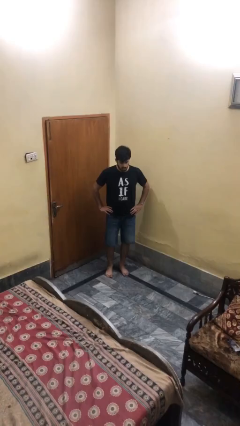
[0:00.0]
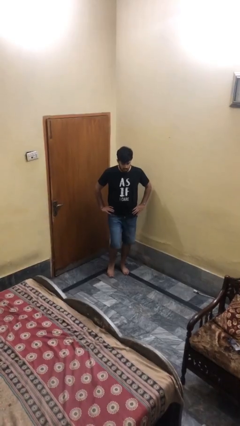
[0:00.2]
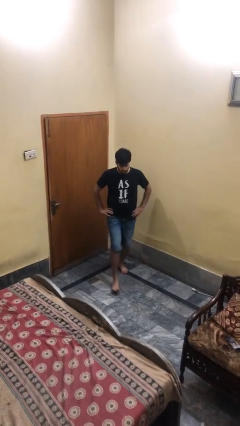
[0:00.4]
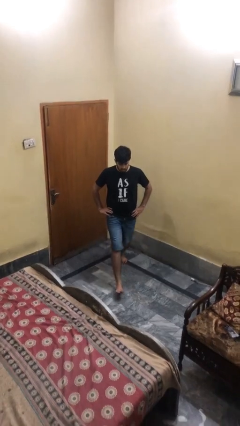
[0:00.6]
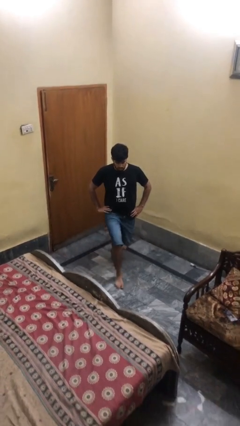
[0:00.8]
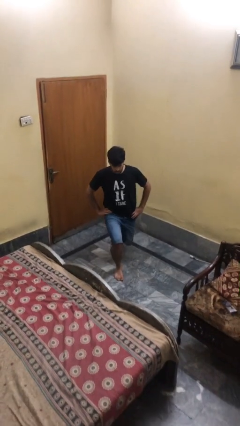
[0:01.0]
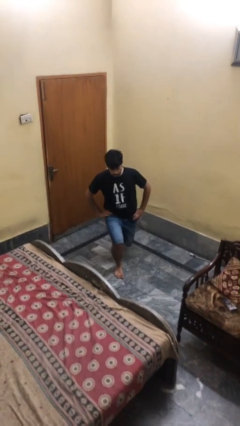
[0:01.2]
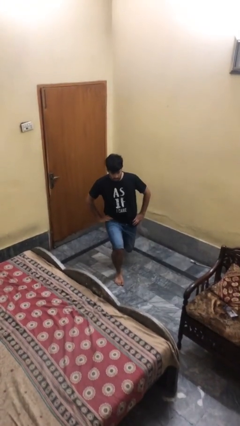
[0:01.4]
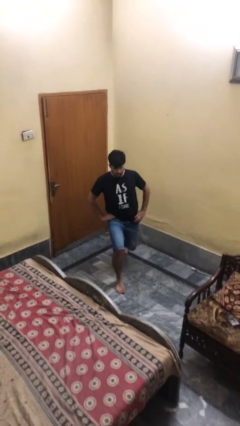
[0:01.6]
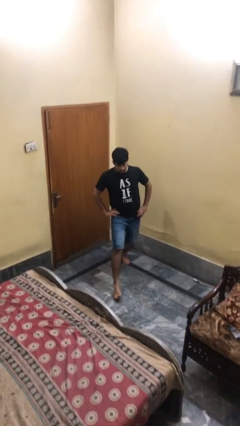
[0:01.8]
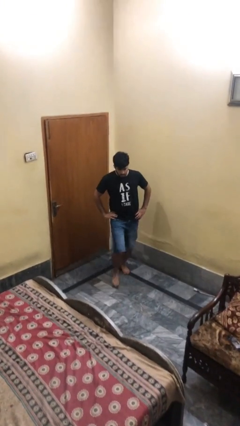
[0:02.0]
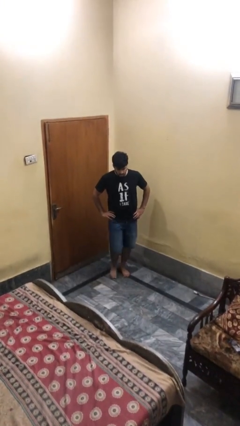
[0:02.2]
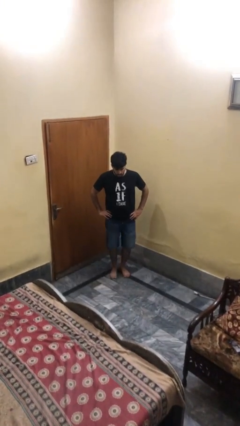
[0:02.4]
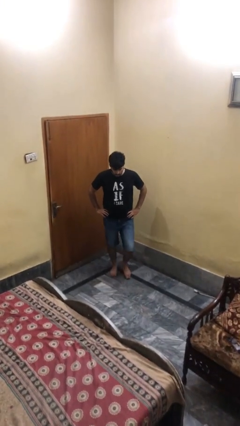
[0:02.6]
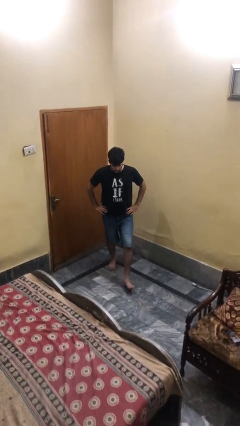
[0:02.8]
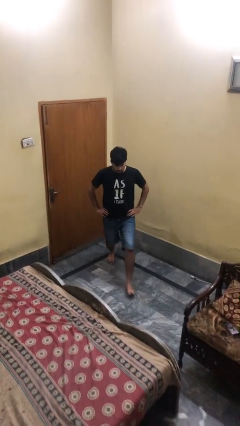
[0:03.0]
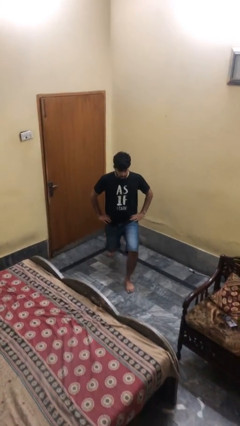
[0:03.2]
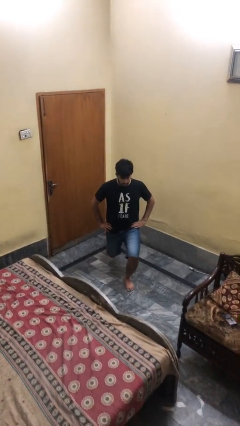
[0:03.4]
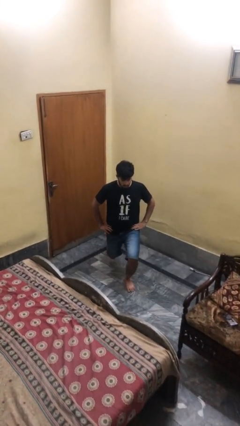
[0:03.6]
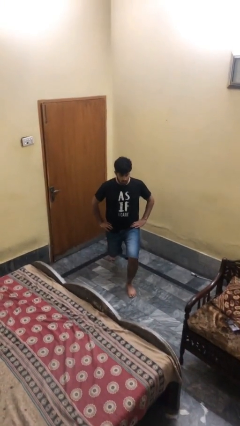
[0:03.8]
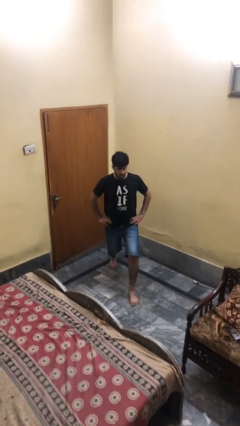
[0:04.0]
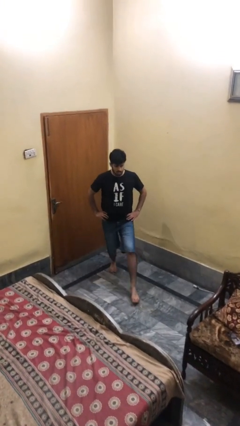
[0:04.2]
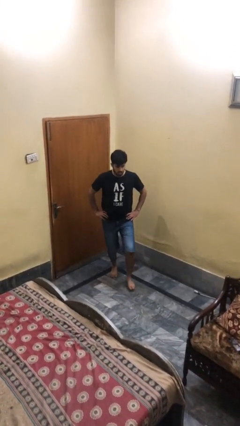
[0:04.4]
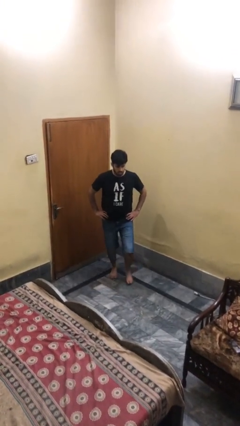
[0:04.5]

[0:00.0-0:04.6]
person exercises with lunges

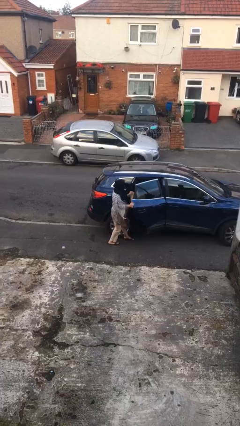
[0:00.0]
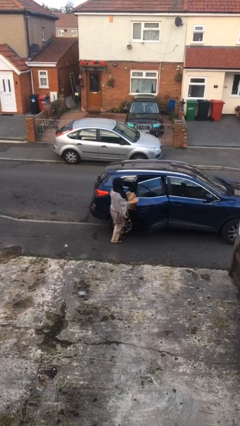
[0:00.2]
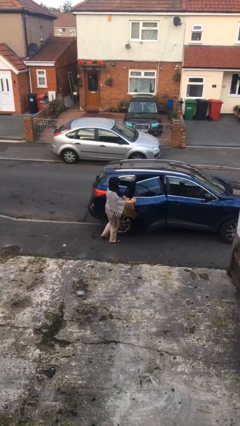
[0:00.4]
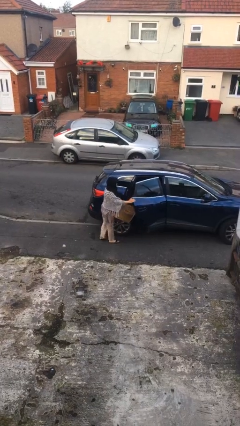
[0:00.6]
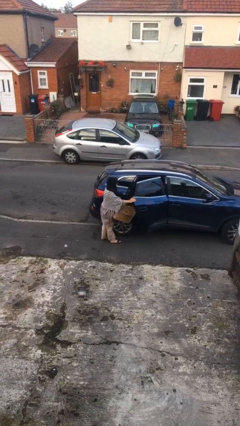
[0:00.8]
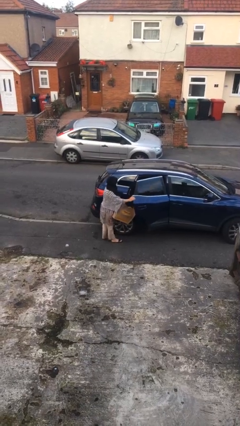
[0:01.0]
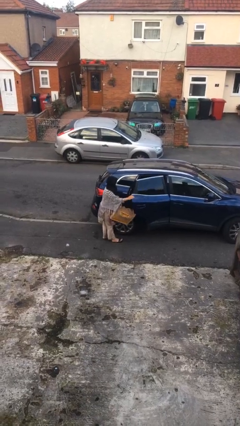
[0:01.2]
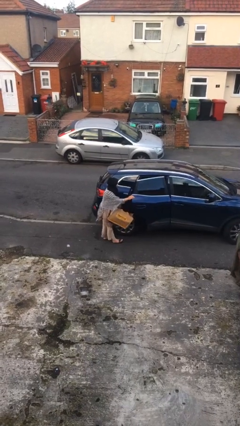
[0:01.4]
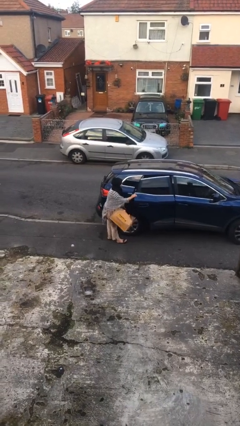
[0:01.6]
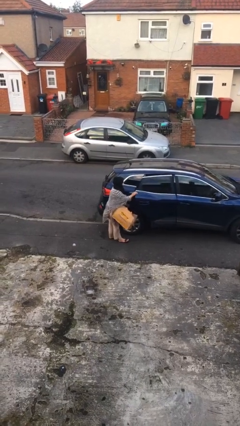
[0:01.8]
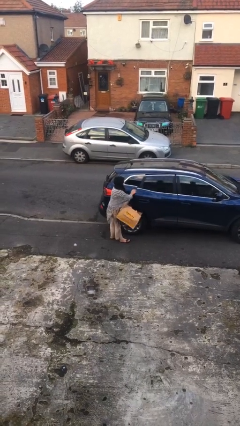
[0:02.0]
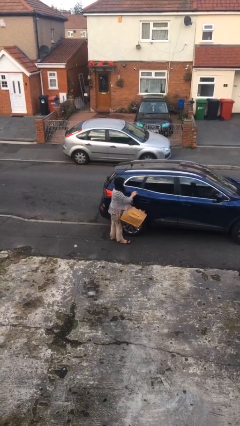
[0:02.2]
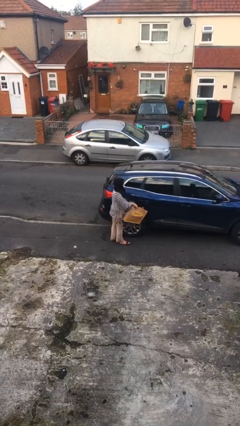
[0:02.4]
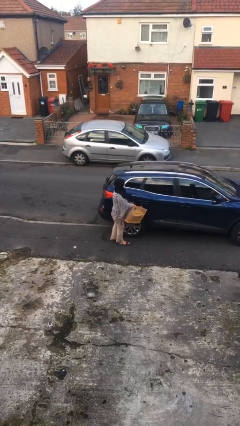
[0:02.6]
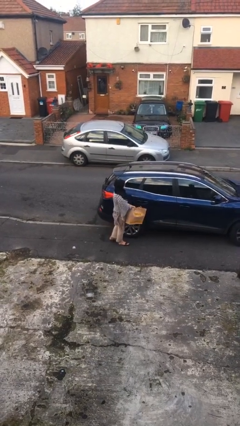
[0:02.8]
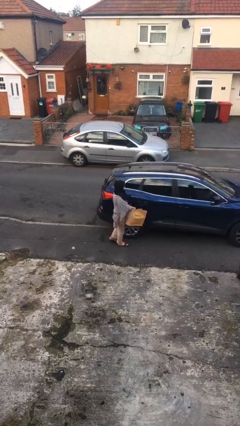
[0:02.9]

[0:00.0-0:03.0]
person closes car door

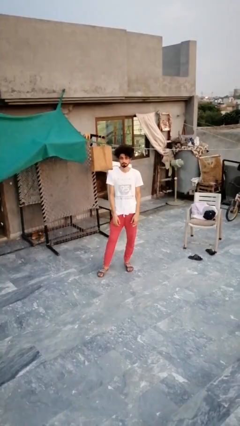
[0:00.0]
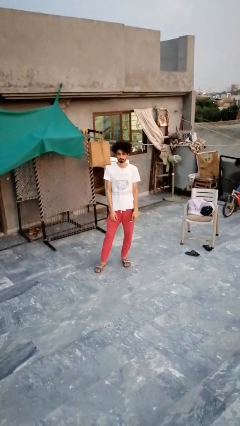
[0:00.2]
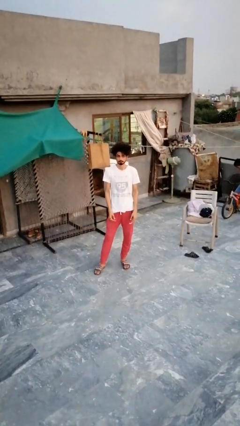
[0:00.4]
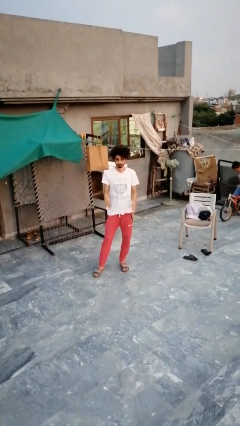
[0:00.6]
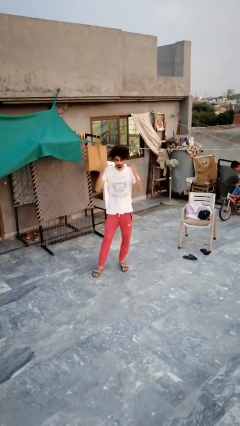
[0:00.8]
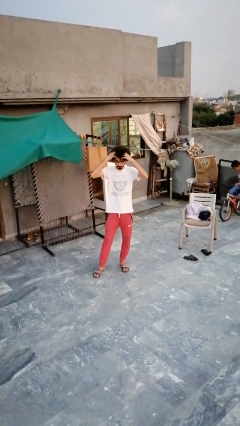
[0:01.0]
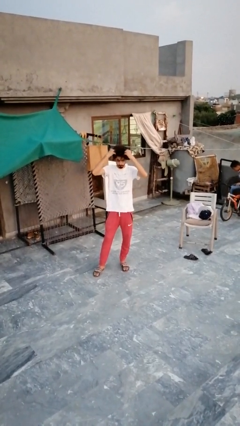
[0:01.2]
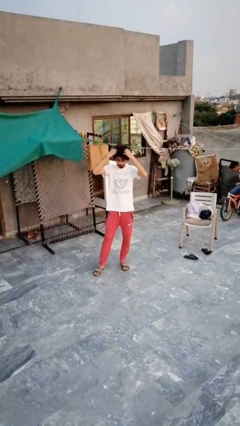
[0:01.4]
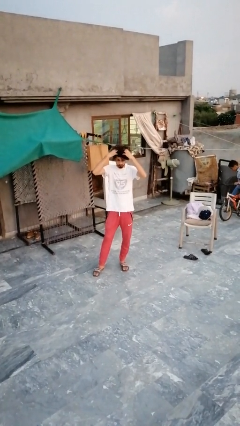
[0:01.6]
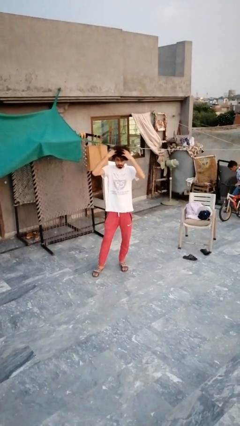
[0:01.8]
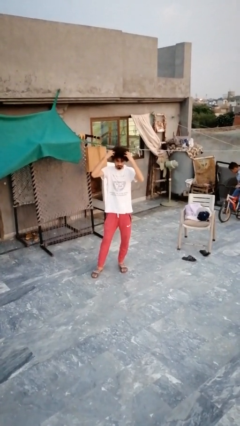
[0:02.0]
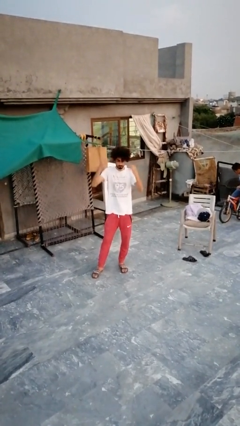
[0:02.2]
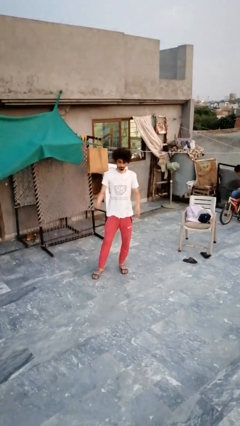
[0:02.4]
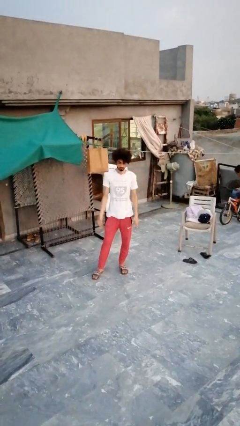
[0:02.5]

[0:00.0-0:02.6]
person strokes hair

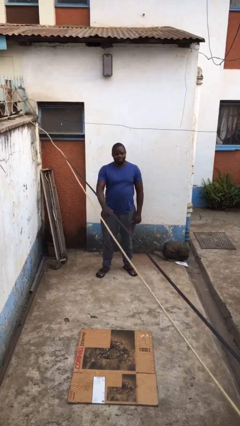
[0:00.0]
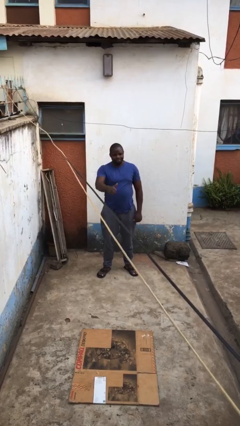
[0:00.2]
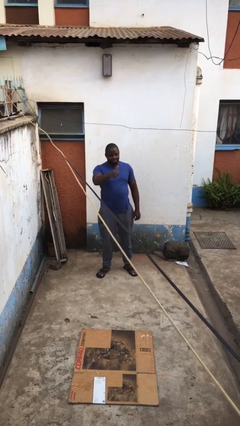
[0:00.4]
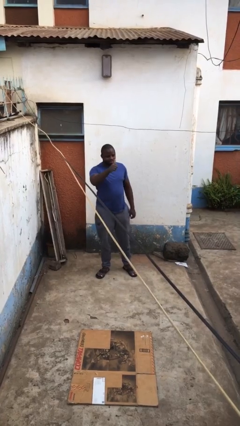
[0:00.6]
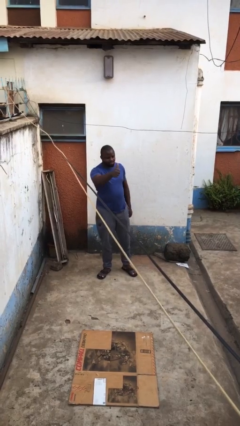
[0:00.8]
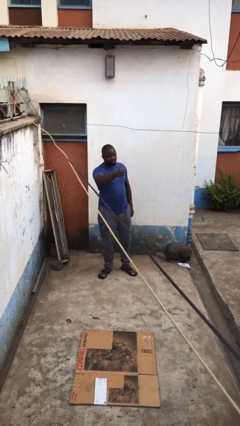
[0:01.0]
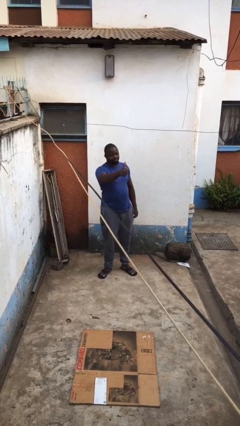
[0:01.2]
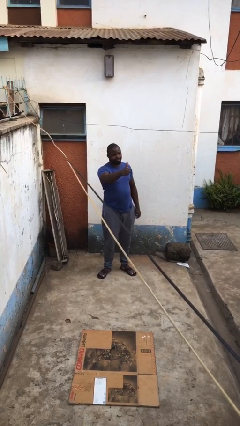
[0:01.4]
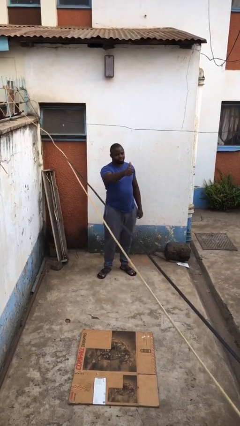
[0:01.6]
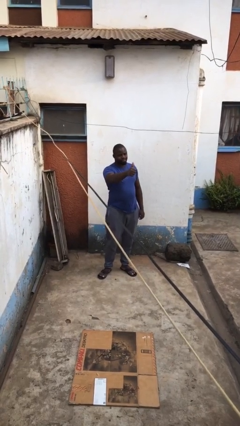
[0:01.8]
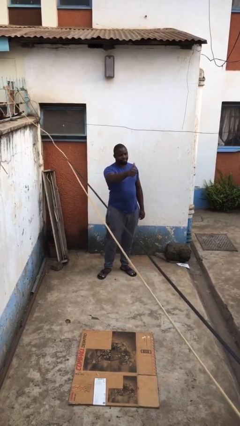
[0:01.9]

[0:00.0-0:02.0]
person gestures thumbs up

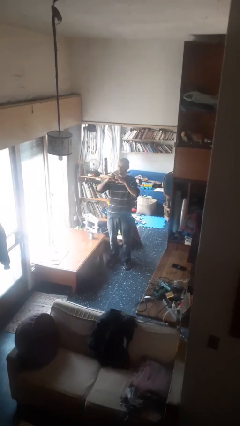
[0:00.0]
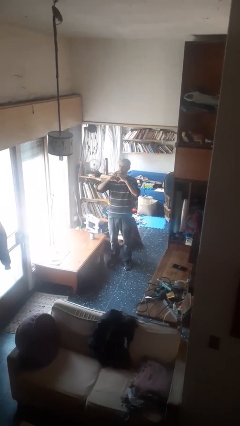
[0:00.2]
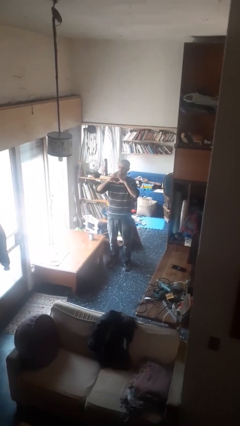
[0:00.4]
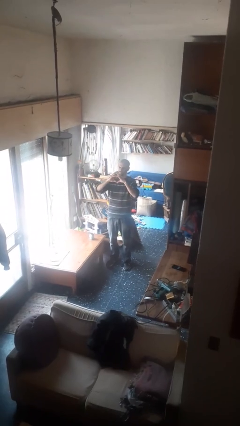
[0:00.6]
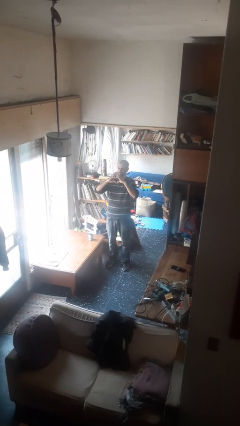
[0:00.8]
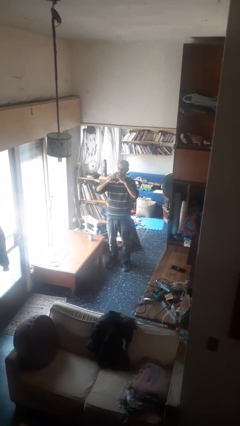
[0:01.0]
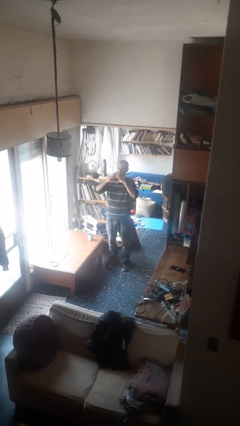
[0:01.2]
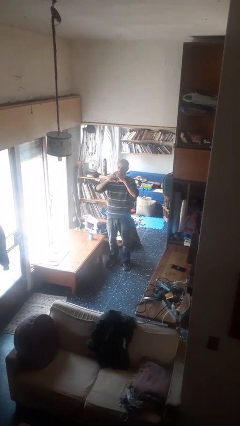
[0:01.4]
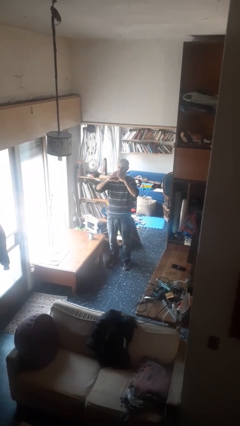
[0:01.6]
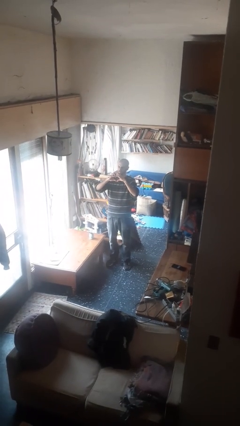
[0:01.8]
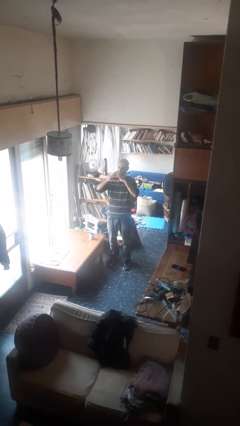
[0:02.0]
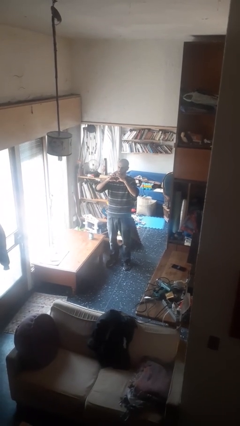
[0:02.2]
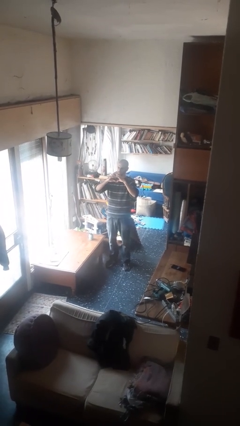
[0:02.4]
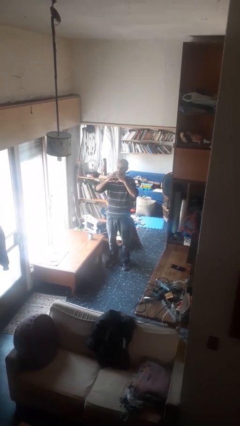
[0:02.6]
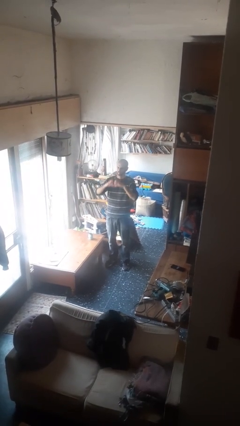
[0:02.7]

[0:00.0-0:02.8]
person gestures heart

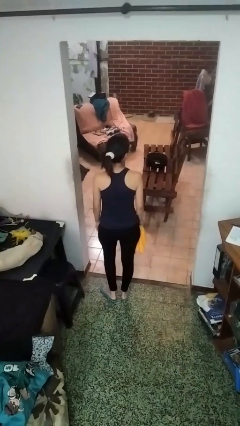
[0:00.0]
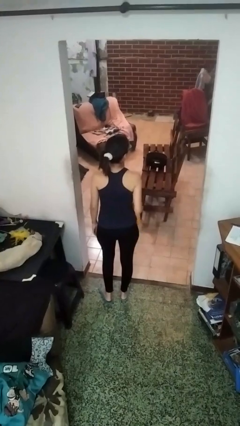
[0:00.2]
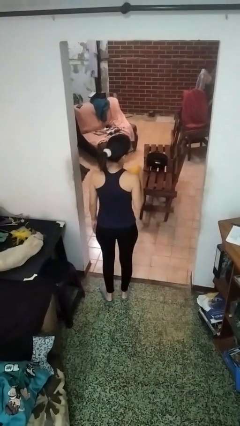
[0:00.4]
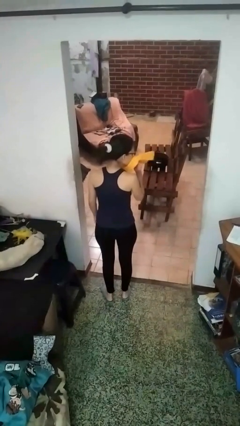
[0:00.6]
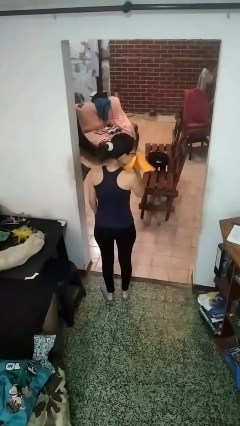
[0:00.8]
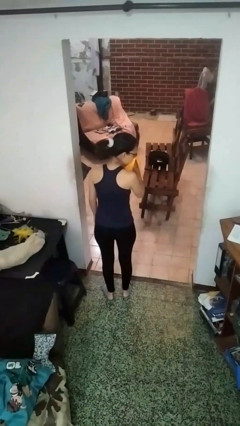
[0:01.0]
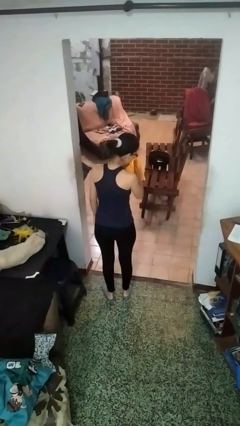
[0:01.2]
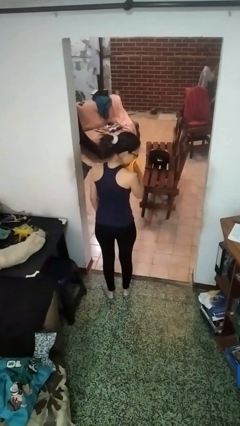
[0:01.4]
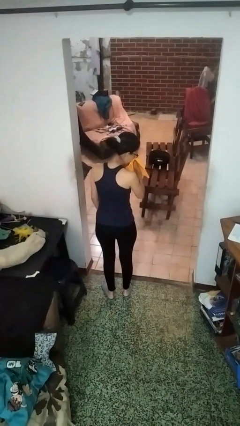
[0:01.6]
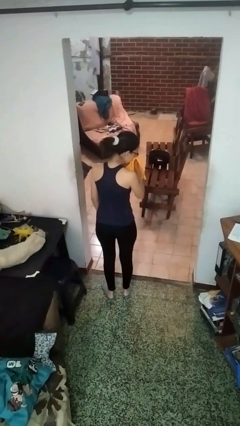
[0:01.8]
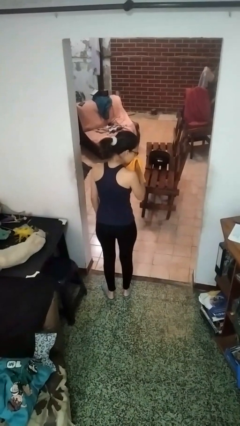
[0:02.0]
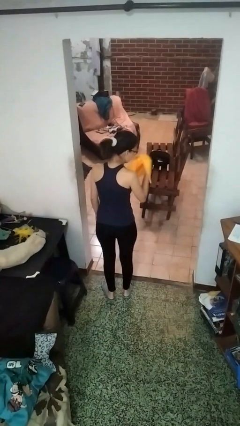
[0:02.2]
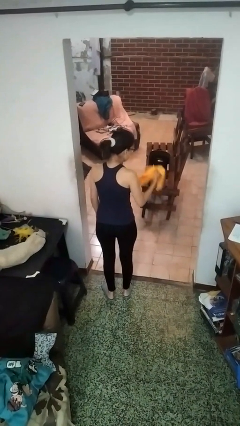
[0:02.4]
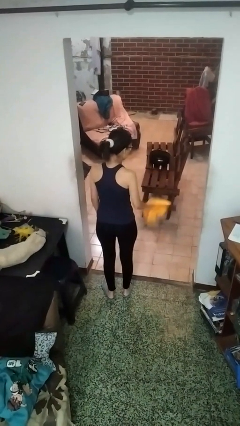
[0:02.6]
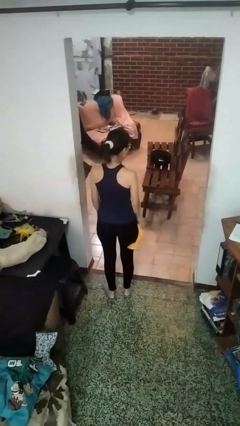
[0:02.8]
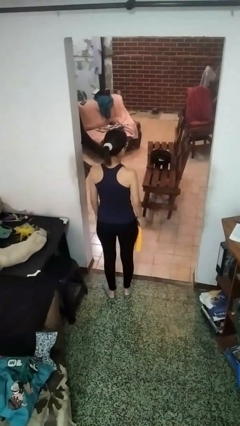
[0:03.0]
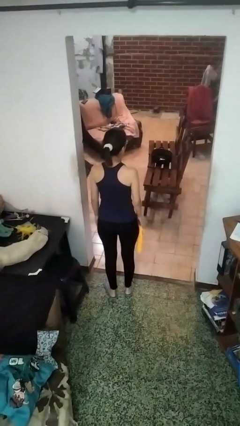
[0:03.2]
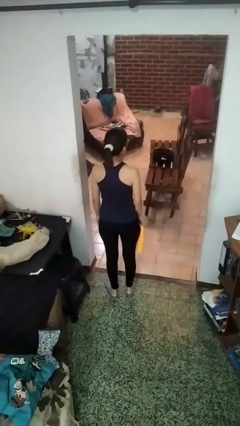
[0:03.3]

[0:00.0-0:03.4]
person blows nose
